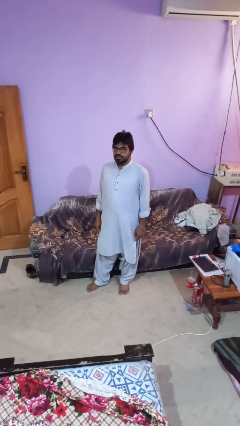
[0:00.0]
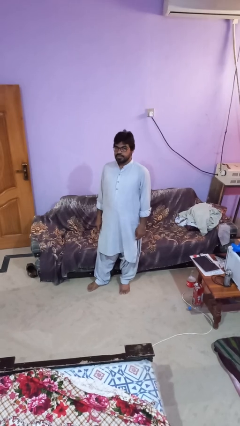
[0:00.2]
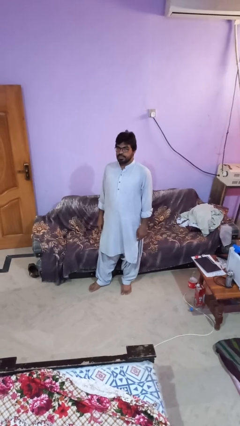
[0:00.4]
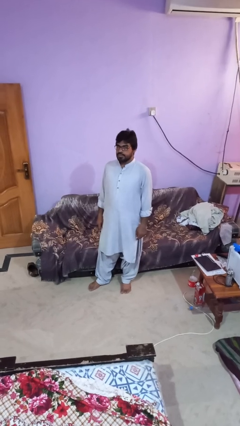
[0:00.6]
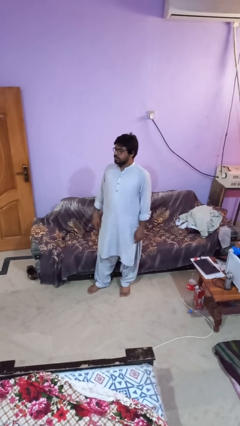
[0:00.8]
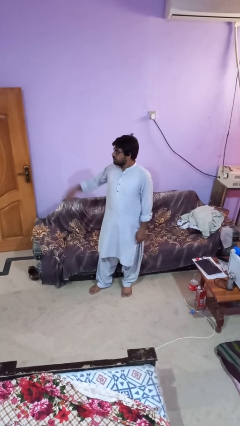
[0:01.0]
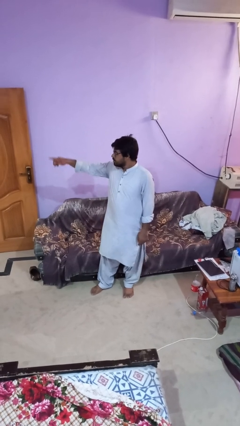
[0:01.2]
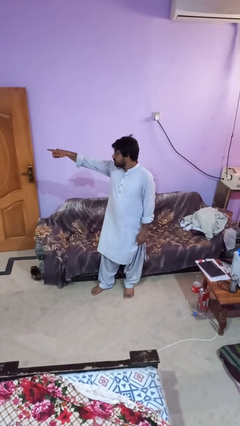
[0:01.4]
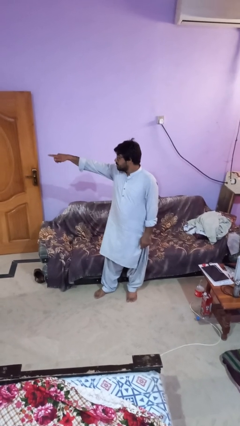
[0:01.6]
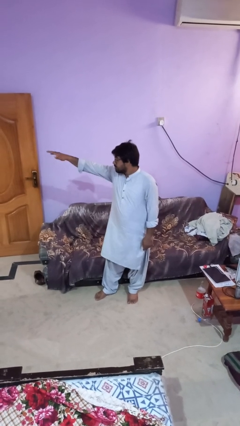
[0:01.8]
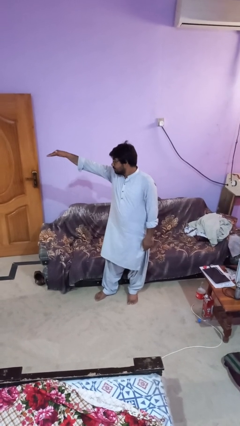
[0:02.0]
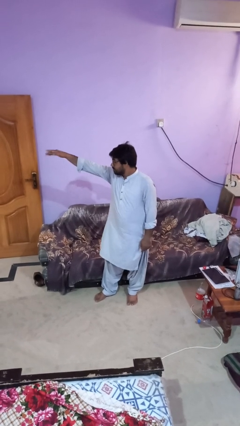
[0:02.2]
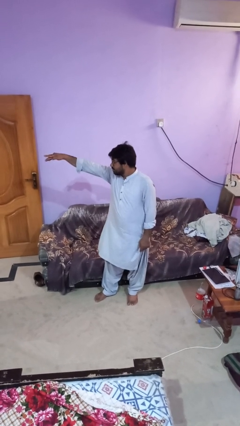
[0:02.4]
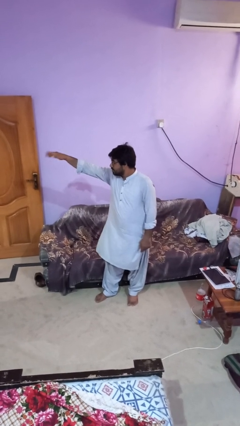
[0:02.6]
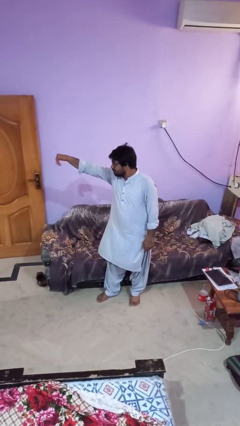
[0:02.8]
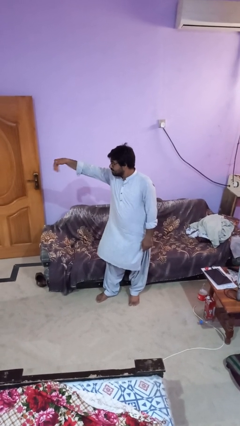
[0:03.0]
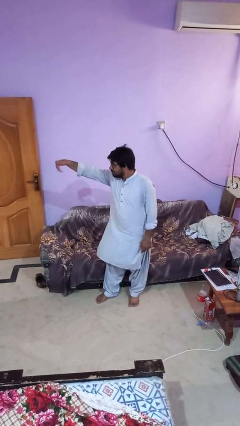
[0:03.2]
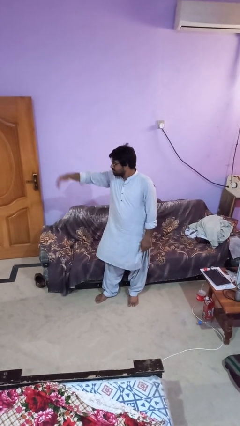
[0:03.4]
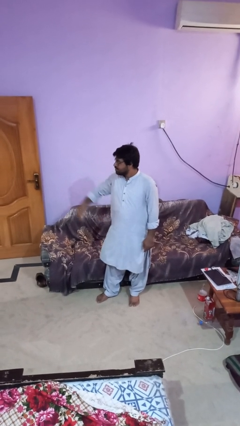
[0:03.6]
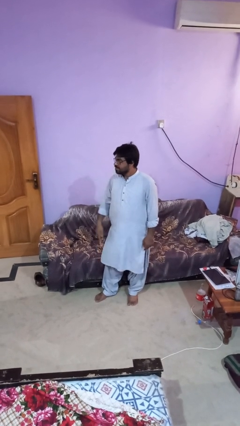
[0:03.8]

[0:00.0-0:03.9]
person gestures come here

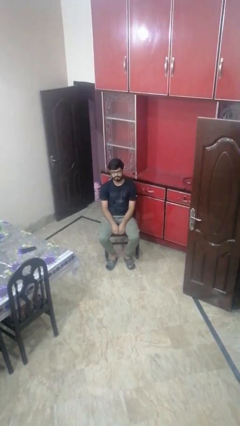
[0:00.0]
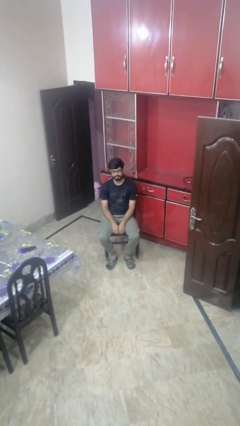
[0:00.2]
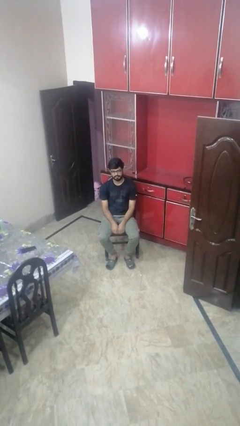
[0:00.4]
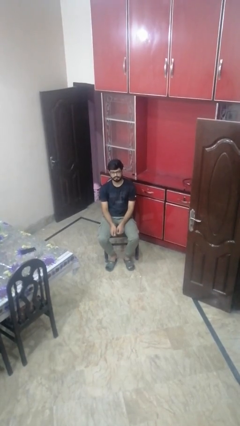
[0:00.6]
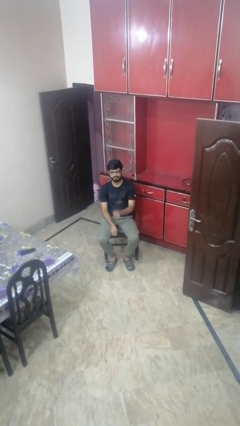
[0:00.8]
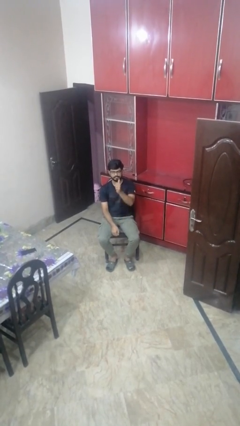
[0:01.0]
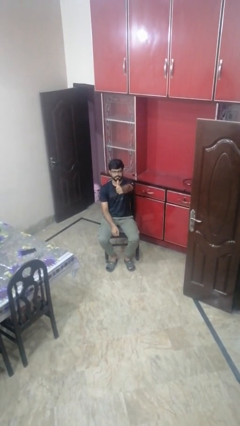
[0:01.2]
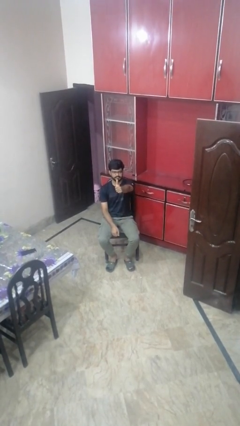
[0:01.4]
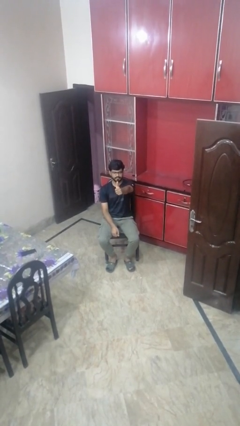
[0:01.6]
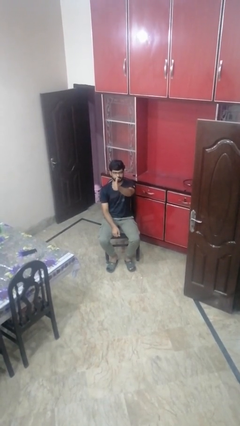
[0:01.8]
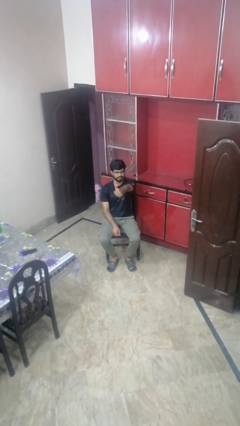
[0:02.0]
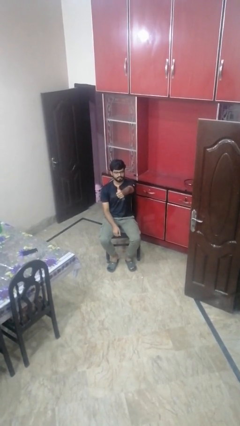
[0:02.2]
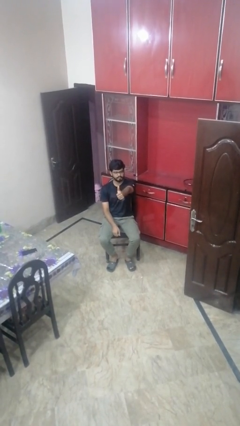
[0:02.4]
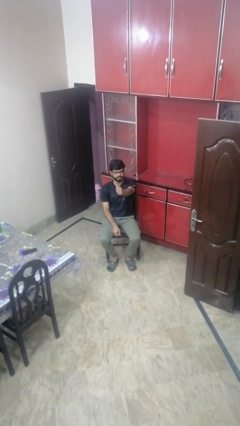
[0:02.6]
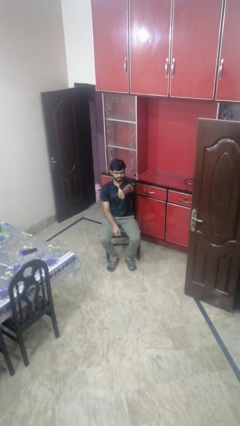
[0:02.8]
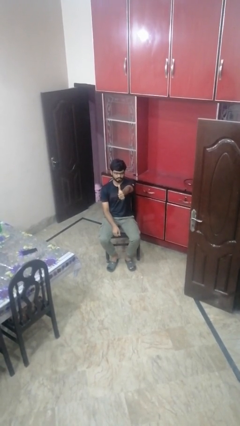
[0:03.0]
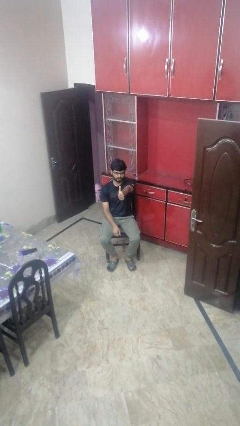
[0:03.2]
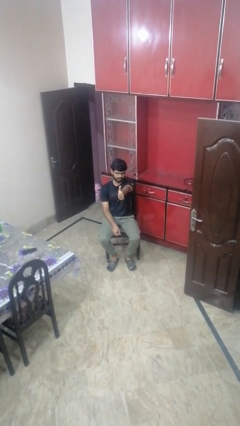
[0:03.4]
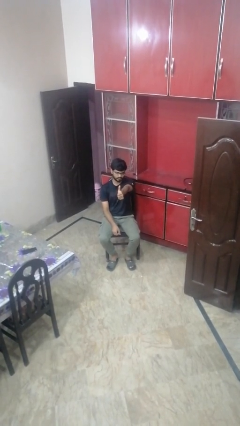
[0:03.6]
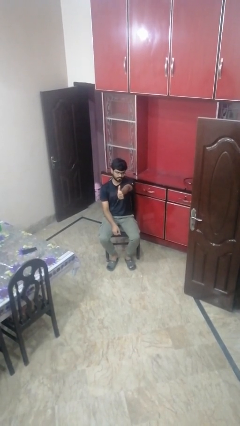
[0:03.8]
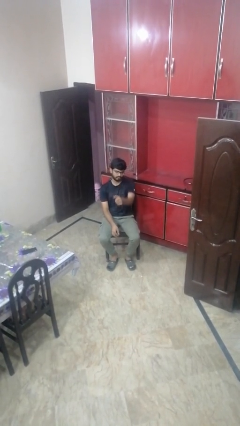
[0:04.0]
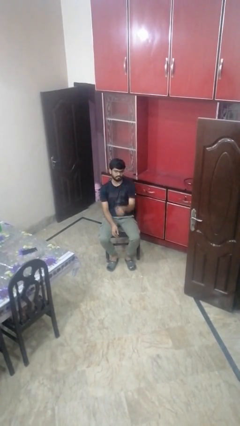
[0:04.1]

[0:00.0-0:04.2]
person gestures thumbs up

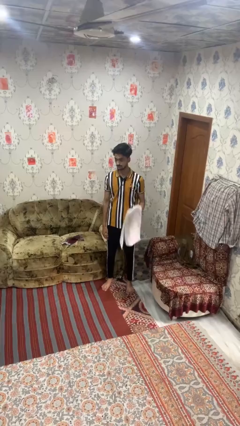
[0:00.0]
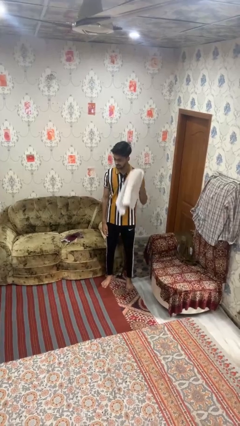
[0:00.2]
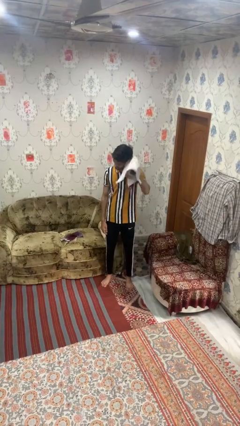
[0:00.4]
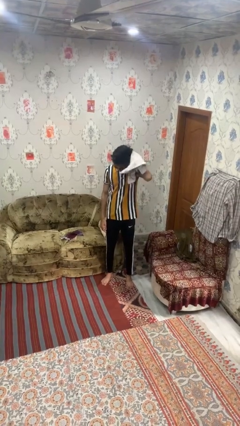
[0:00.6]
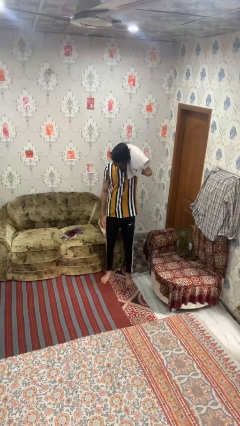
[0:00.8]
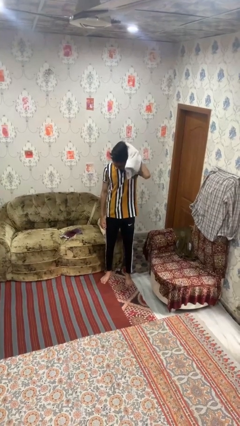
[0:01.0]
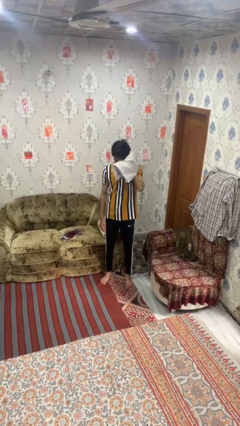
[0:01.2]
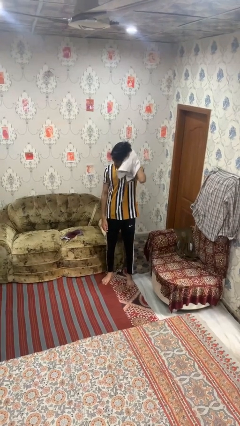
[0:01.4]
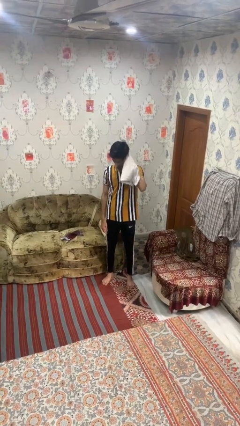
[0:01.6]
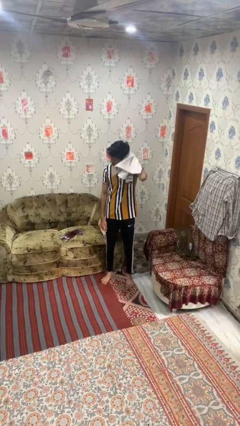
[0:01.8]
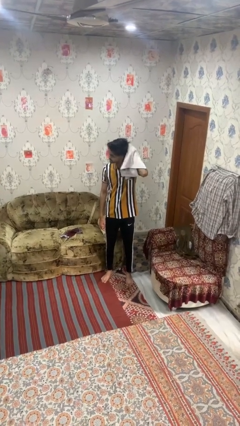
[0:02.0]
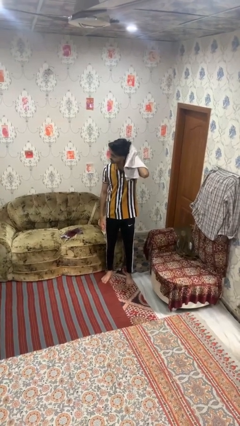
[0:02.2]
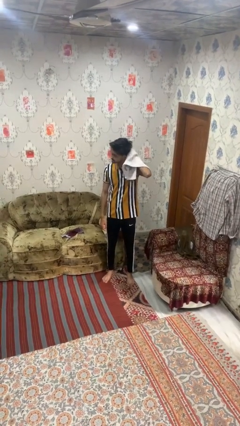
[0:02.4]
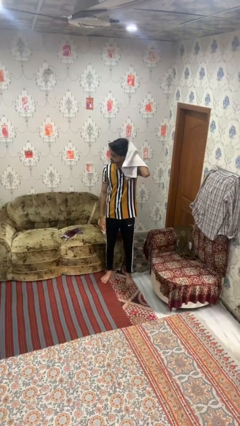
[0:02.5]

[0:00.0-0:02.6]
person dries hair with towel

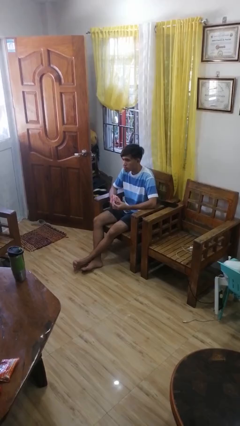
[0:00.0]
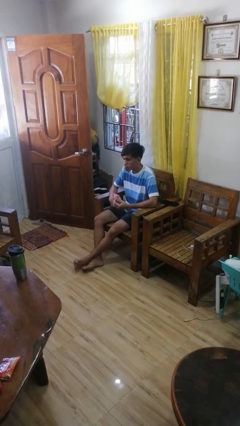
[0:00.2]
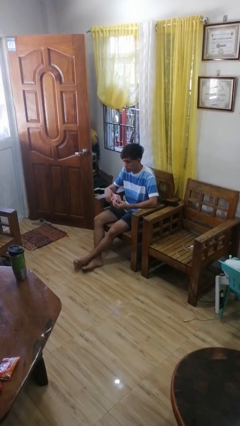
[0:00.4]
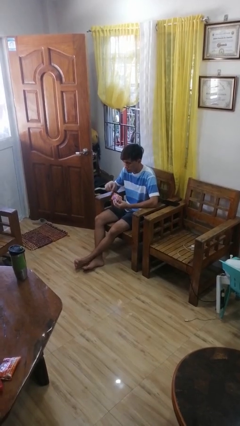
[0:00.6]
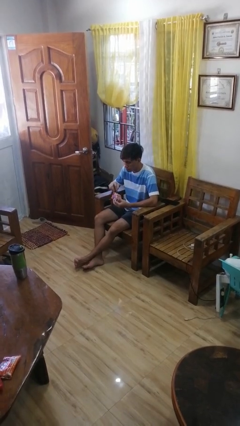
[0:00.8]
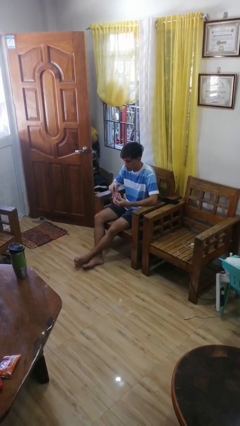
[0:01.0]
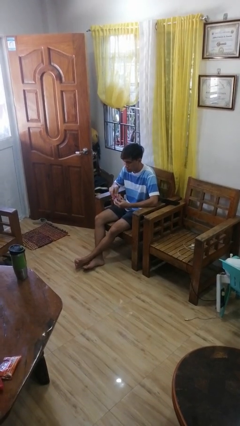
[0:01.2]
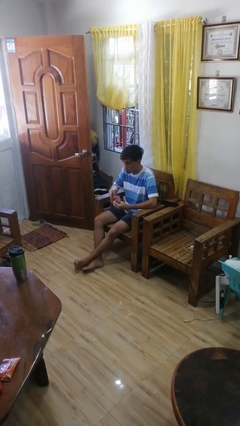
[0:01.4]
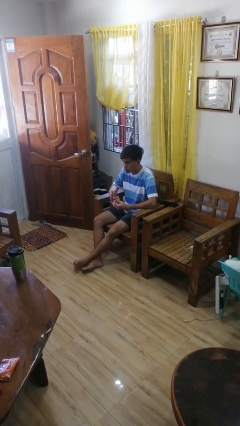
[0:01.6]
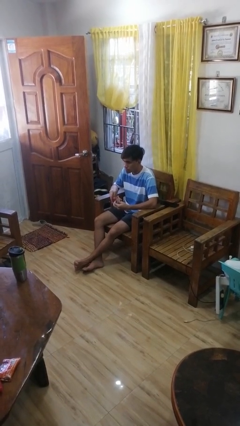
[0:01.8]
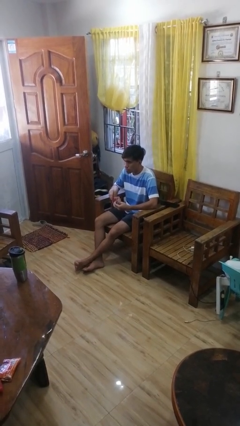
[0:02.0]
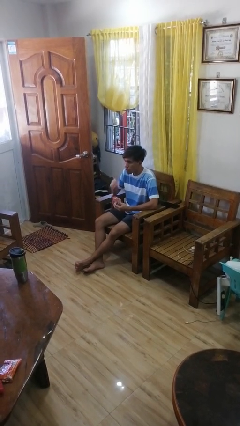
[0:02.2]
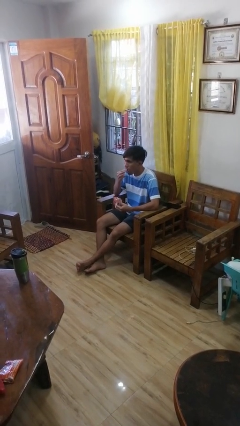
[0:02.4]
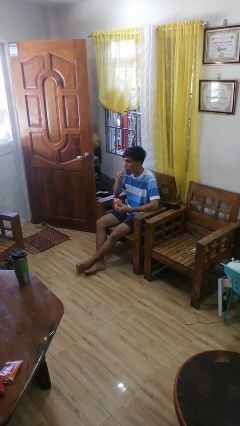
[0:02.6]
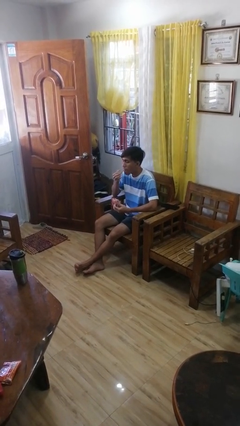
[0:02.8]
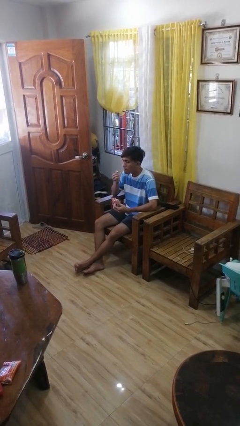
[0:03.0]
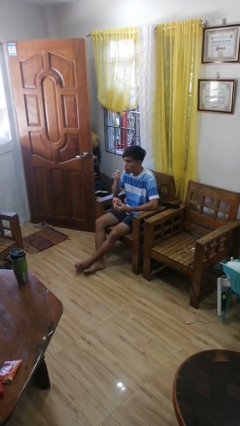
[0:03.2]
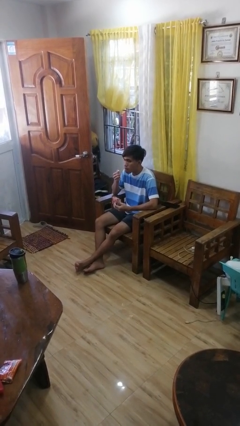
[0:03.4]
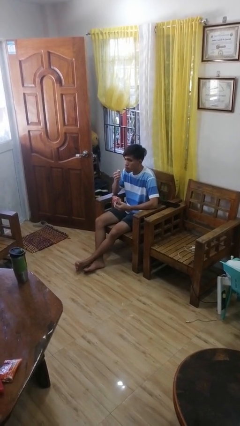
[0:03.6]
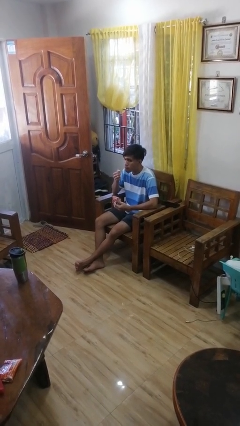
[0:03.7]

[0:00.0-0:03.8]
person eats snack from bag

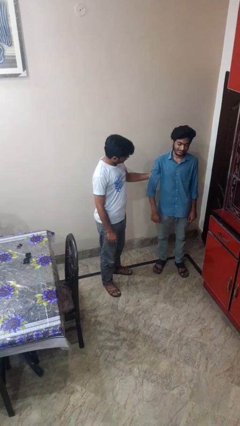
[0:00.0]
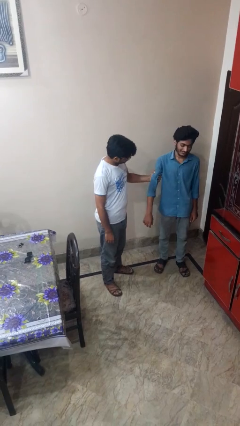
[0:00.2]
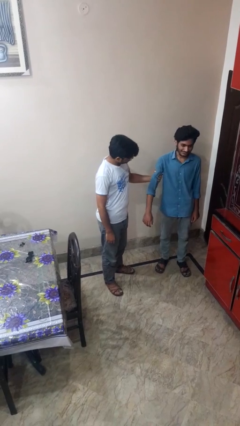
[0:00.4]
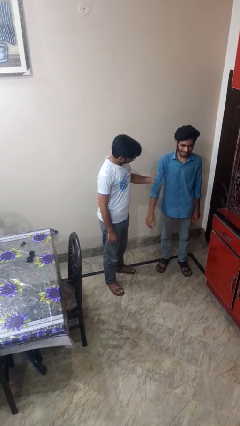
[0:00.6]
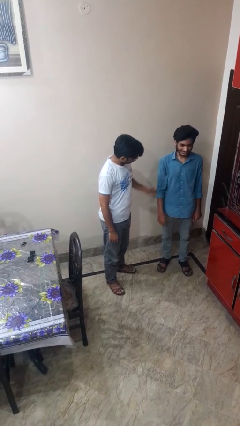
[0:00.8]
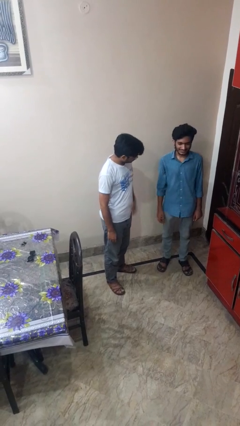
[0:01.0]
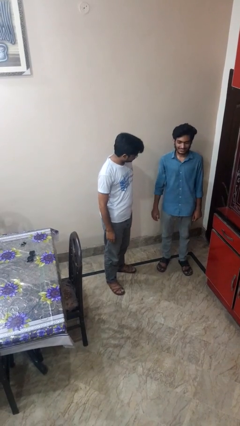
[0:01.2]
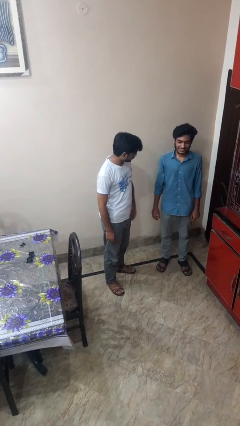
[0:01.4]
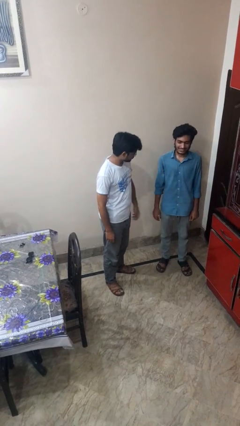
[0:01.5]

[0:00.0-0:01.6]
person takes object from backpack

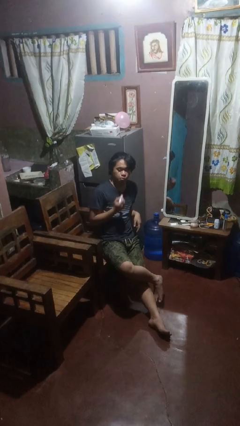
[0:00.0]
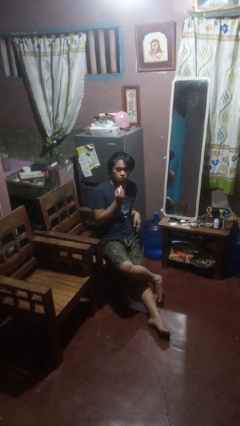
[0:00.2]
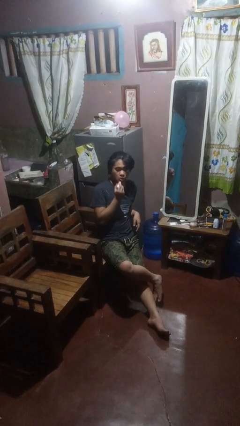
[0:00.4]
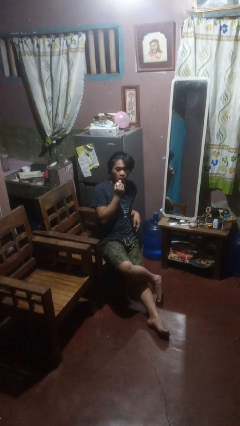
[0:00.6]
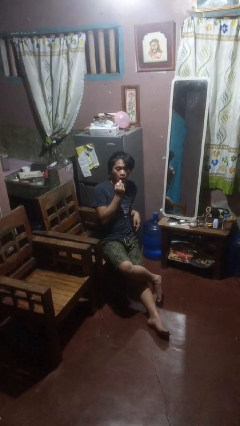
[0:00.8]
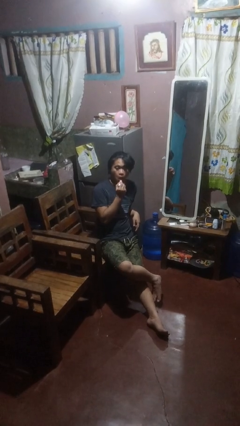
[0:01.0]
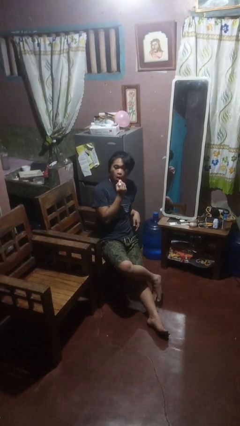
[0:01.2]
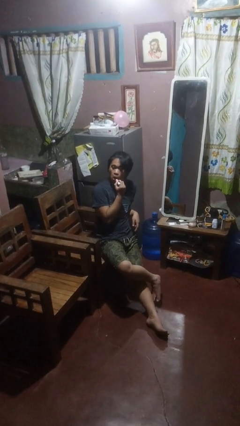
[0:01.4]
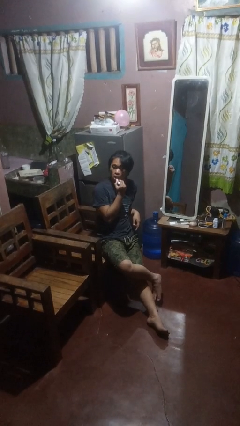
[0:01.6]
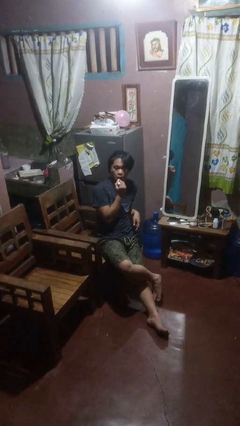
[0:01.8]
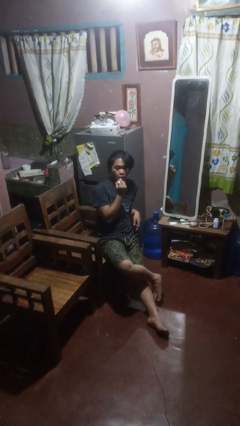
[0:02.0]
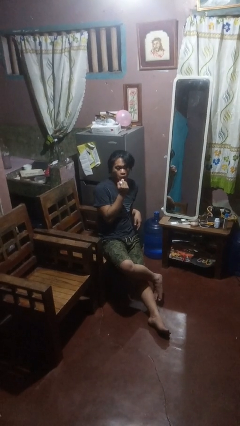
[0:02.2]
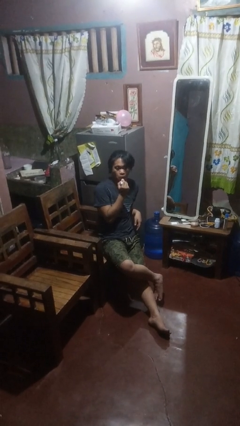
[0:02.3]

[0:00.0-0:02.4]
person applies lip makeup
